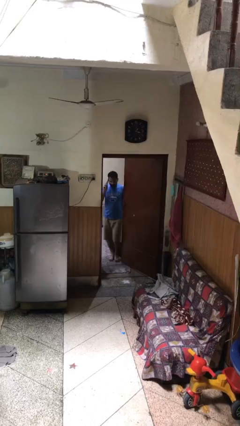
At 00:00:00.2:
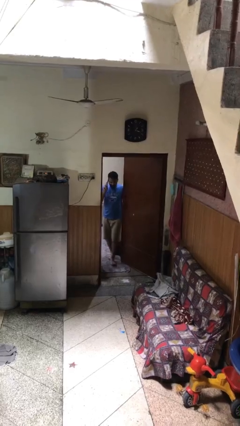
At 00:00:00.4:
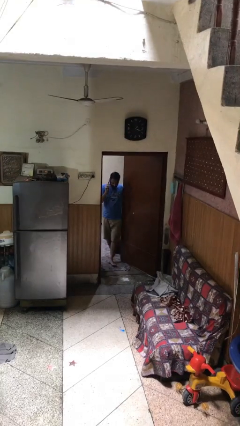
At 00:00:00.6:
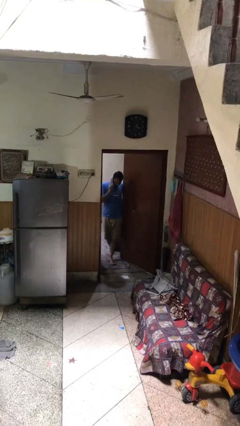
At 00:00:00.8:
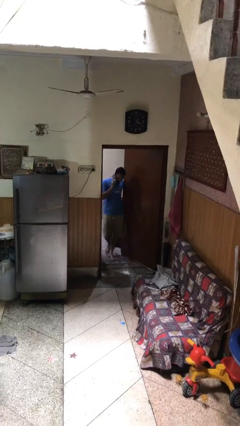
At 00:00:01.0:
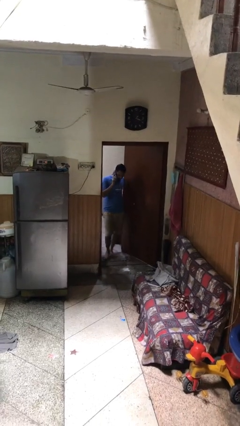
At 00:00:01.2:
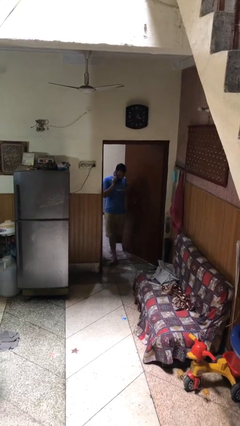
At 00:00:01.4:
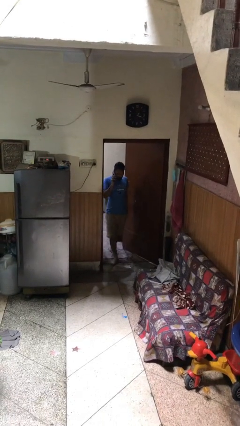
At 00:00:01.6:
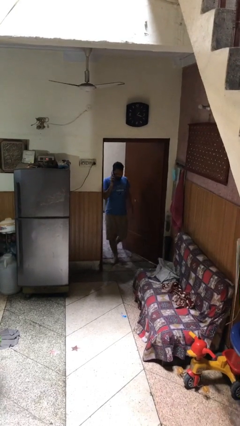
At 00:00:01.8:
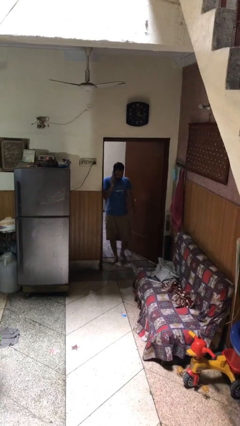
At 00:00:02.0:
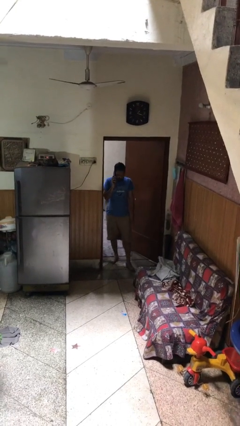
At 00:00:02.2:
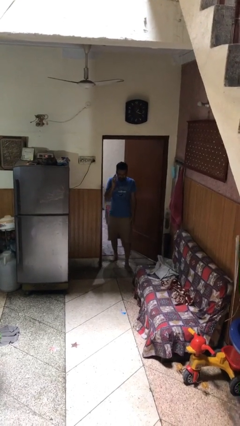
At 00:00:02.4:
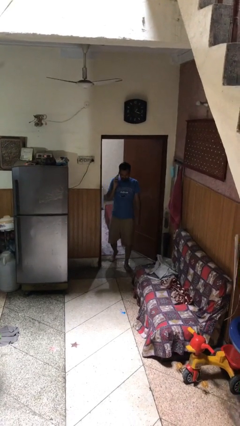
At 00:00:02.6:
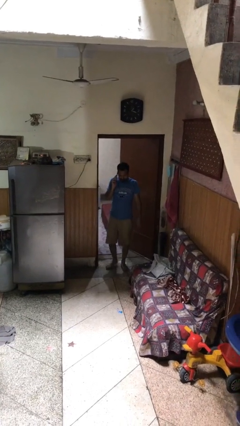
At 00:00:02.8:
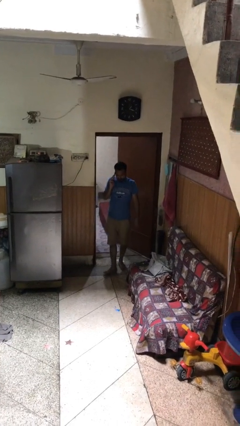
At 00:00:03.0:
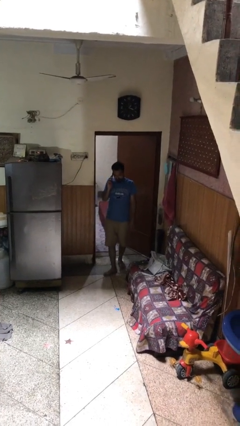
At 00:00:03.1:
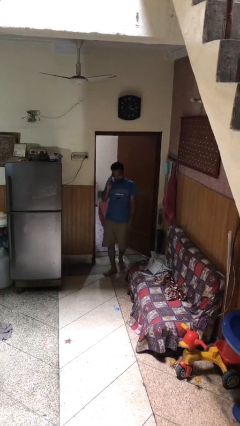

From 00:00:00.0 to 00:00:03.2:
person enters scene through structure

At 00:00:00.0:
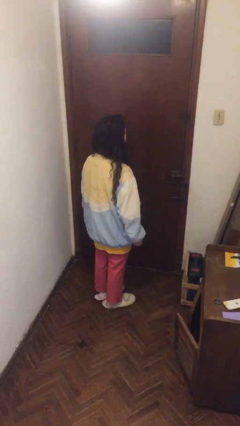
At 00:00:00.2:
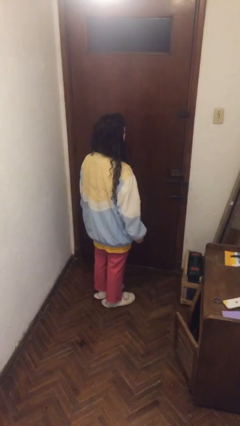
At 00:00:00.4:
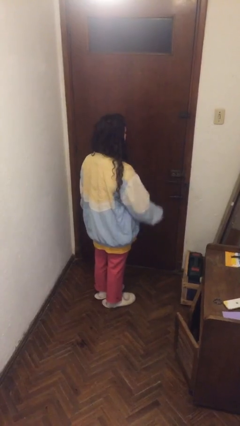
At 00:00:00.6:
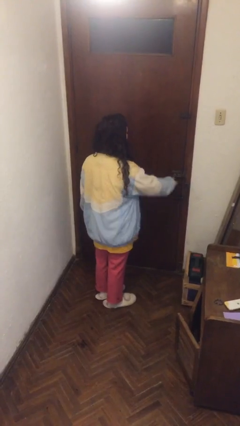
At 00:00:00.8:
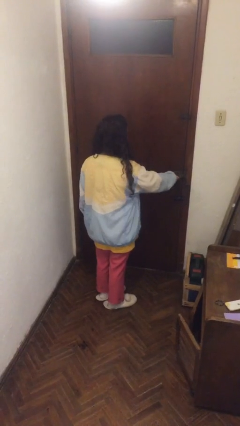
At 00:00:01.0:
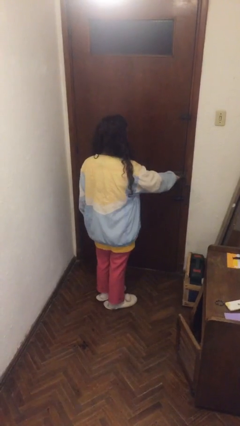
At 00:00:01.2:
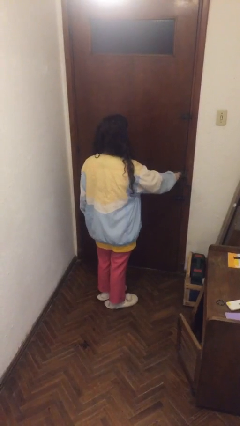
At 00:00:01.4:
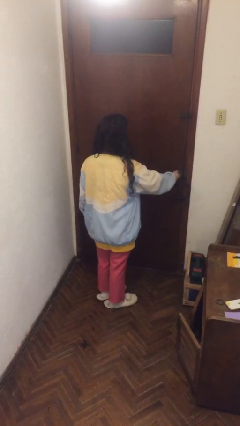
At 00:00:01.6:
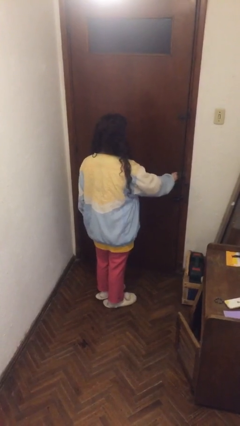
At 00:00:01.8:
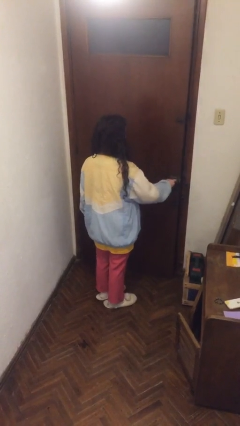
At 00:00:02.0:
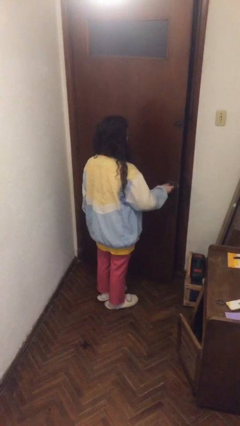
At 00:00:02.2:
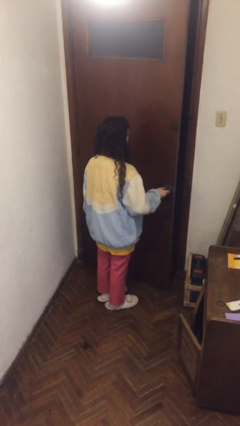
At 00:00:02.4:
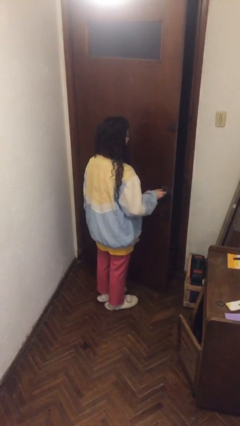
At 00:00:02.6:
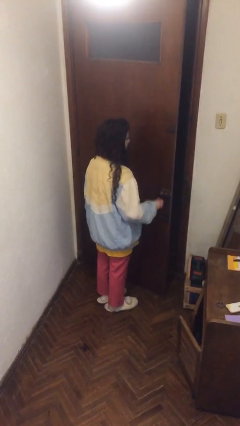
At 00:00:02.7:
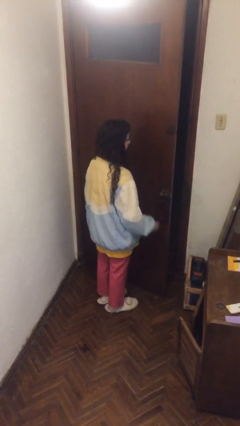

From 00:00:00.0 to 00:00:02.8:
person opens facility door

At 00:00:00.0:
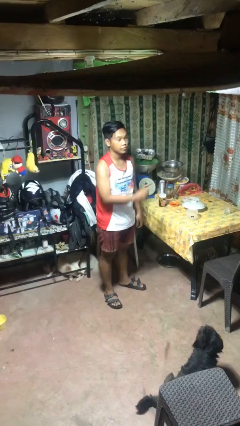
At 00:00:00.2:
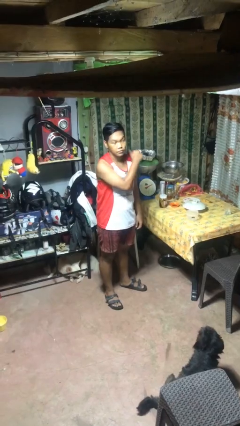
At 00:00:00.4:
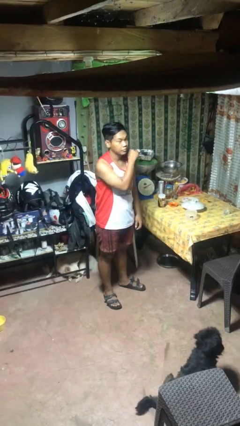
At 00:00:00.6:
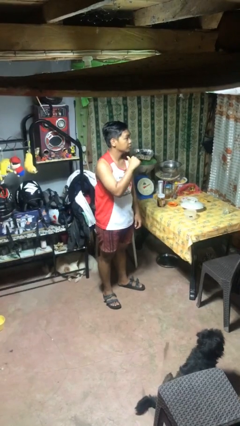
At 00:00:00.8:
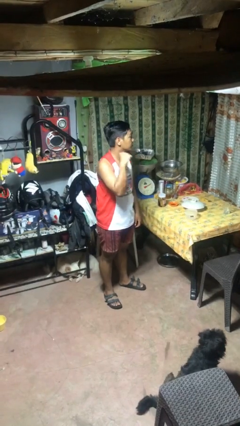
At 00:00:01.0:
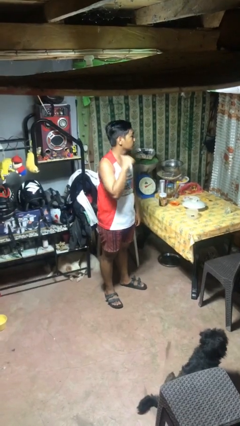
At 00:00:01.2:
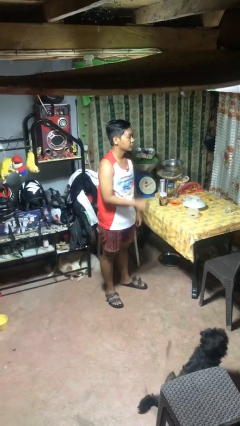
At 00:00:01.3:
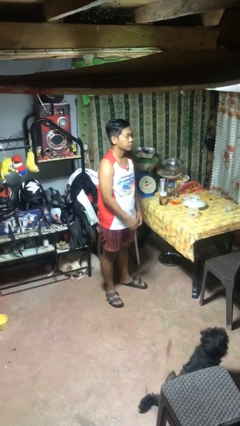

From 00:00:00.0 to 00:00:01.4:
person gestures cut

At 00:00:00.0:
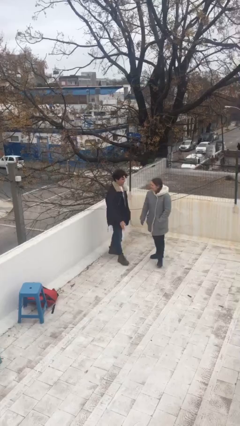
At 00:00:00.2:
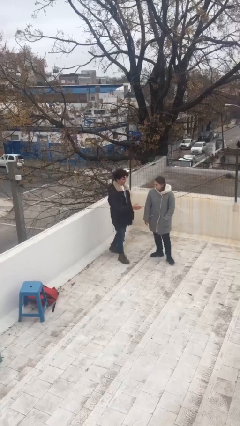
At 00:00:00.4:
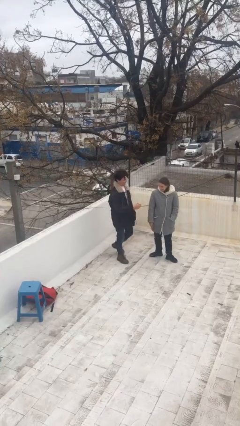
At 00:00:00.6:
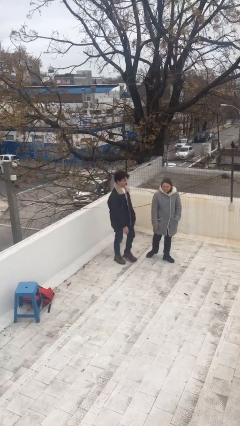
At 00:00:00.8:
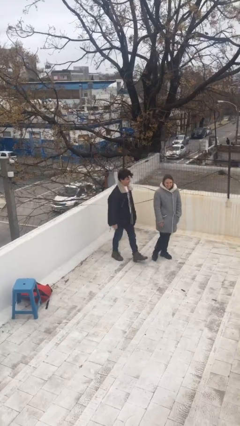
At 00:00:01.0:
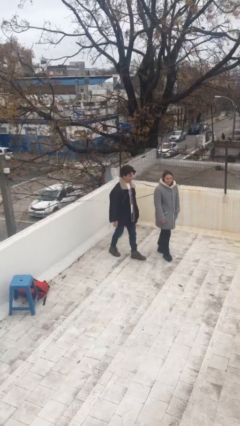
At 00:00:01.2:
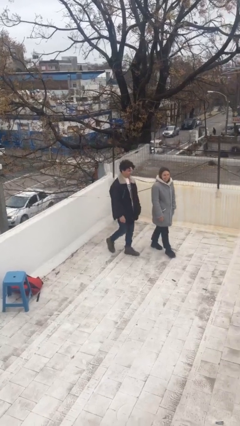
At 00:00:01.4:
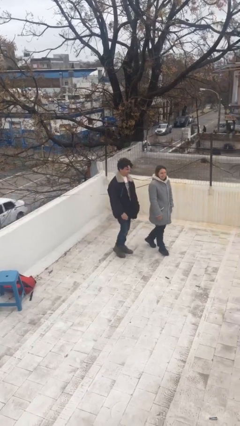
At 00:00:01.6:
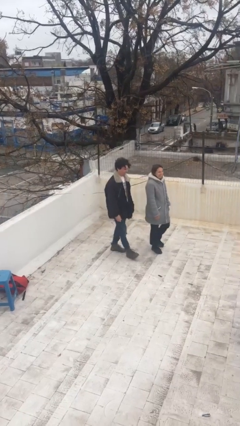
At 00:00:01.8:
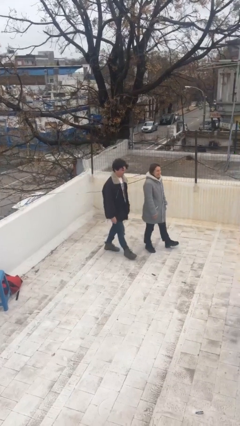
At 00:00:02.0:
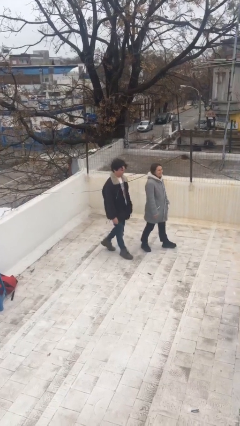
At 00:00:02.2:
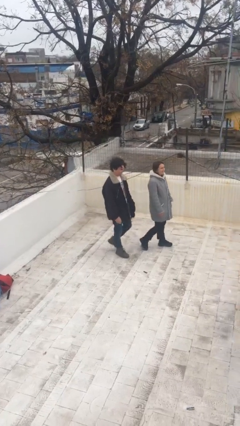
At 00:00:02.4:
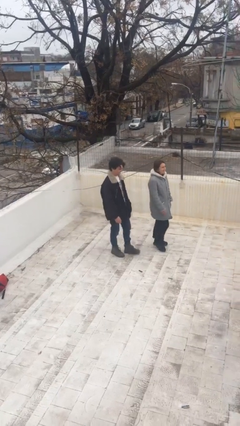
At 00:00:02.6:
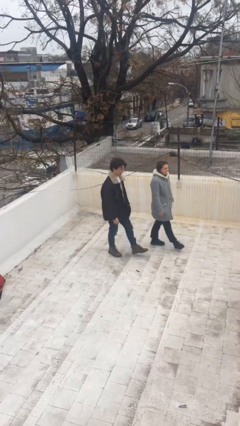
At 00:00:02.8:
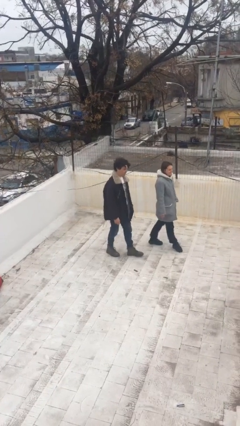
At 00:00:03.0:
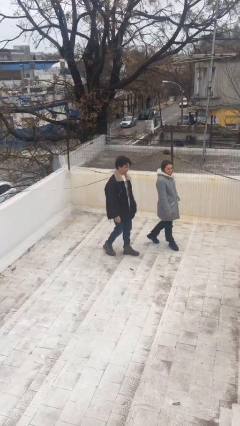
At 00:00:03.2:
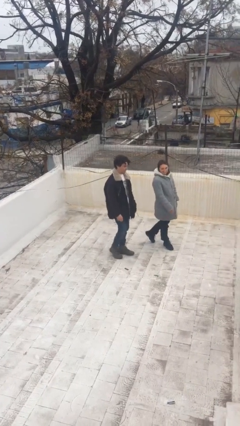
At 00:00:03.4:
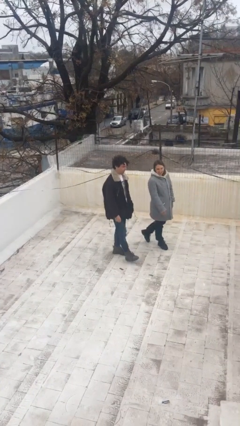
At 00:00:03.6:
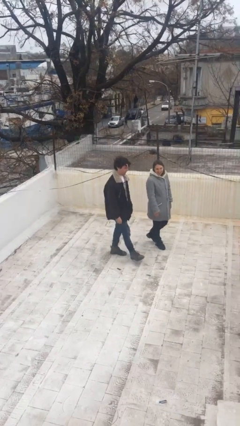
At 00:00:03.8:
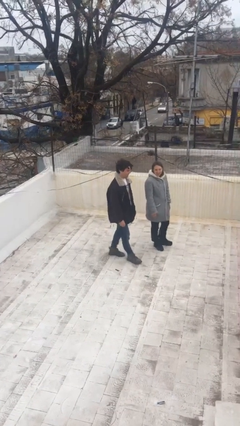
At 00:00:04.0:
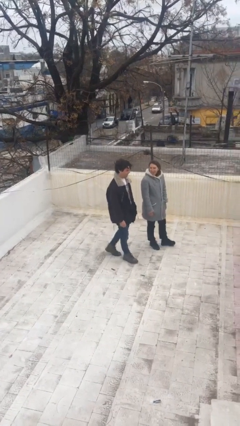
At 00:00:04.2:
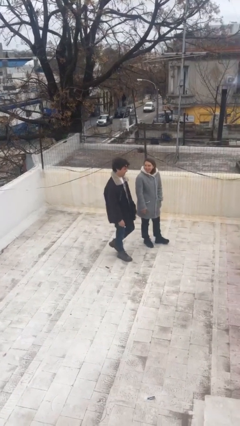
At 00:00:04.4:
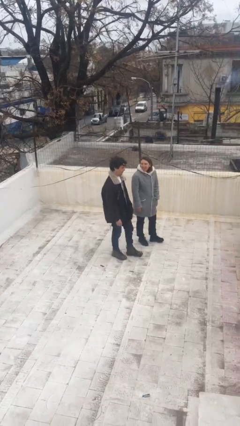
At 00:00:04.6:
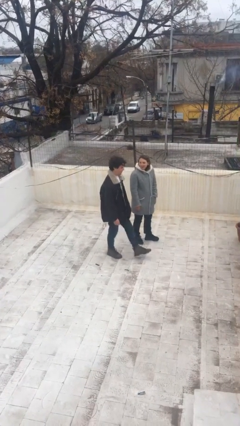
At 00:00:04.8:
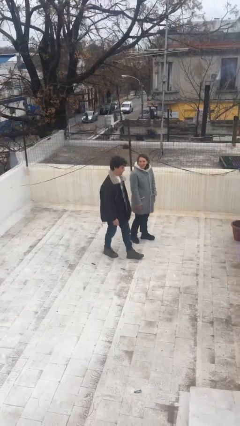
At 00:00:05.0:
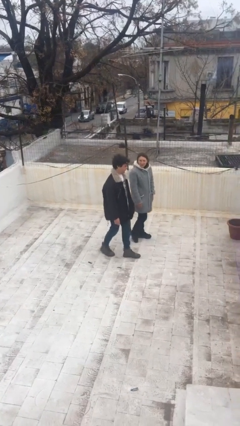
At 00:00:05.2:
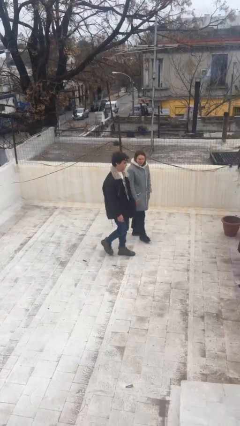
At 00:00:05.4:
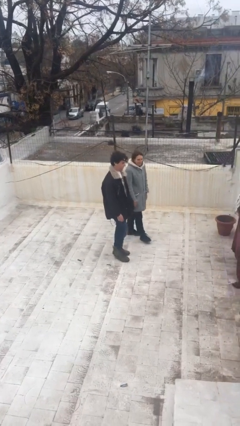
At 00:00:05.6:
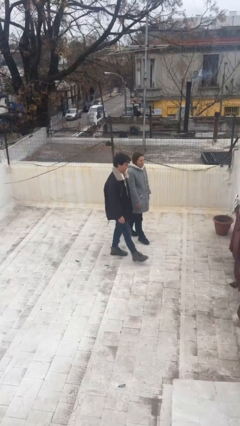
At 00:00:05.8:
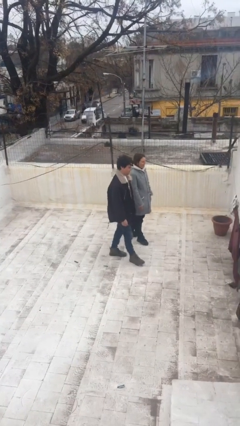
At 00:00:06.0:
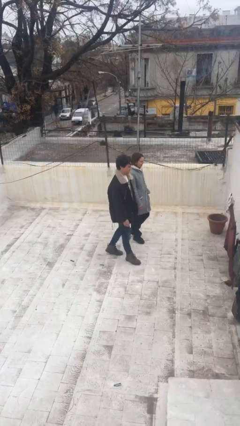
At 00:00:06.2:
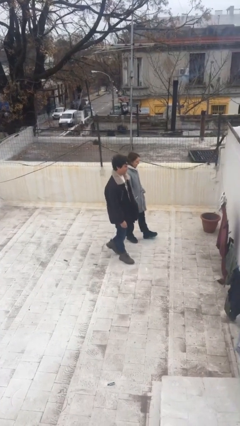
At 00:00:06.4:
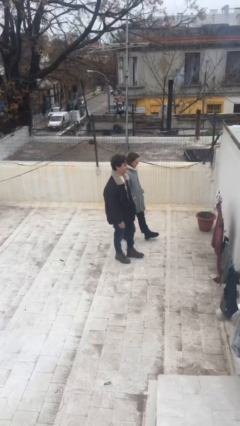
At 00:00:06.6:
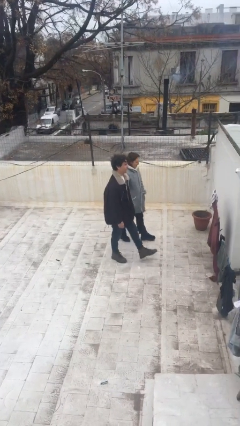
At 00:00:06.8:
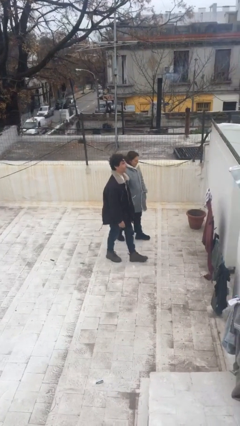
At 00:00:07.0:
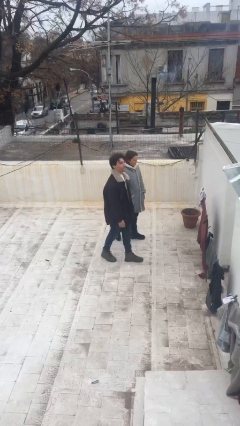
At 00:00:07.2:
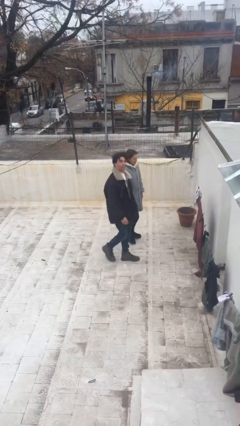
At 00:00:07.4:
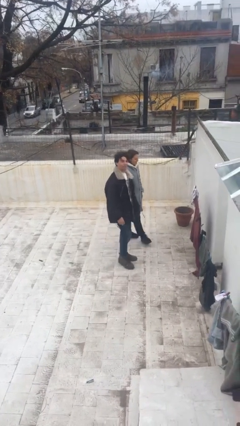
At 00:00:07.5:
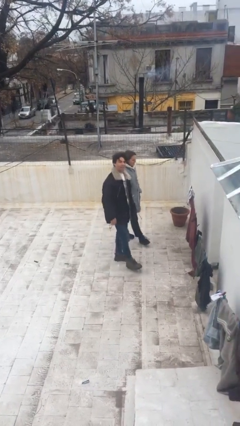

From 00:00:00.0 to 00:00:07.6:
person talks to person

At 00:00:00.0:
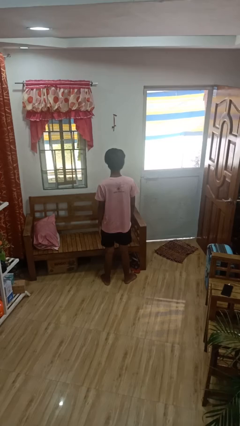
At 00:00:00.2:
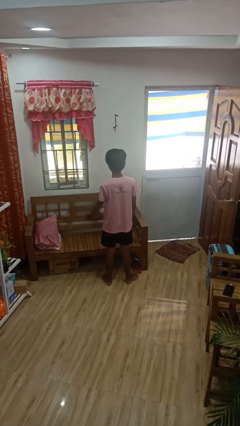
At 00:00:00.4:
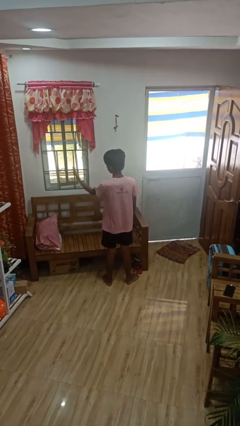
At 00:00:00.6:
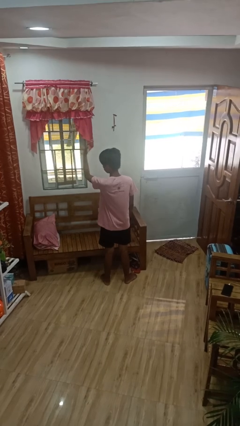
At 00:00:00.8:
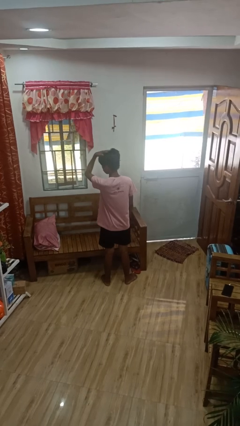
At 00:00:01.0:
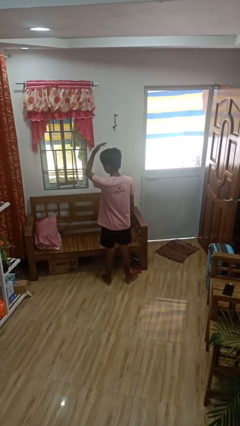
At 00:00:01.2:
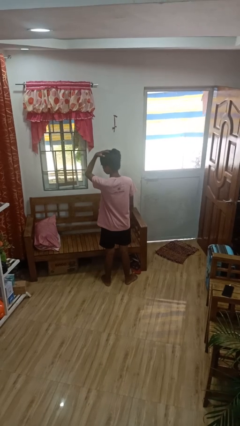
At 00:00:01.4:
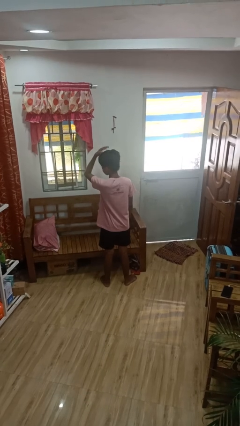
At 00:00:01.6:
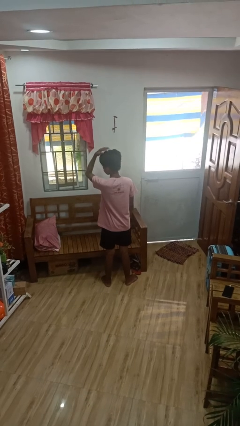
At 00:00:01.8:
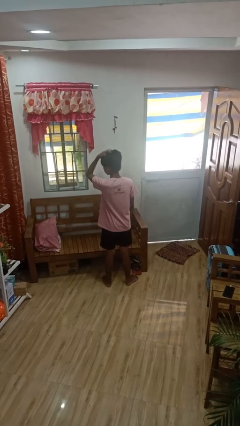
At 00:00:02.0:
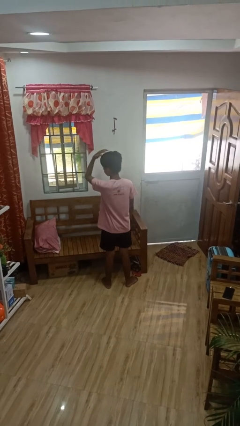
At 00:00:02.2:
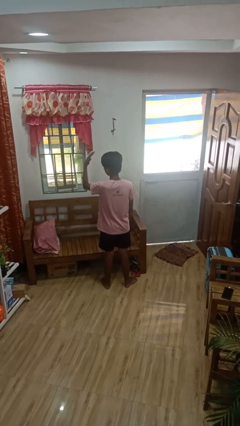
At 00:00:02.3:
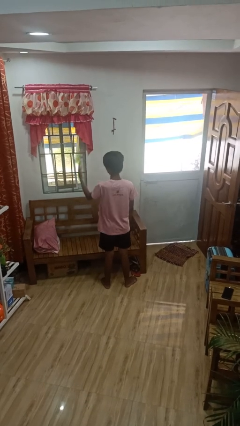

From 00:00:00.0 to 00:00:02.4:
person pats head
